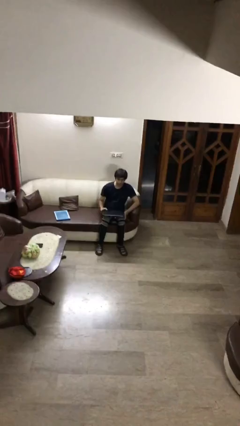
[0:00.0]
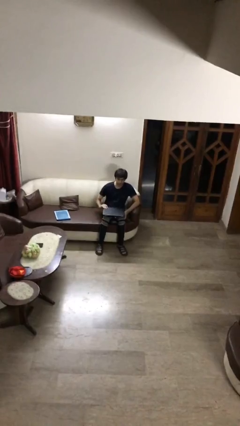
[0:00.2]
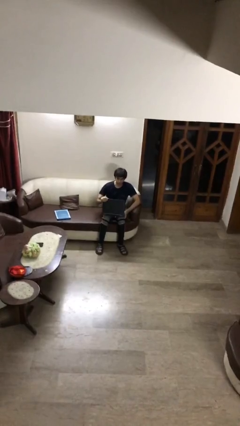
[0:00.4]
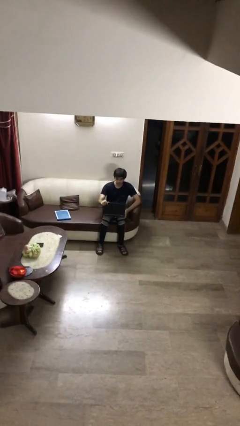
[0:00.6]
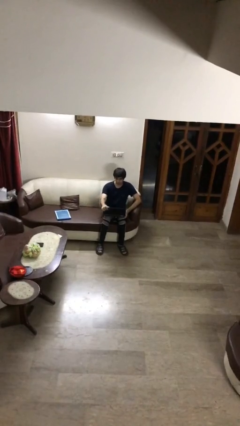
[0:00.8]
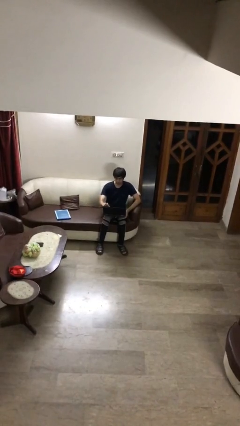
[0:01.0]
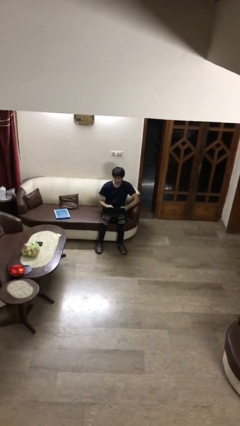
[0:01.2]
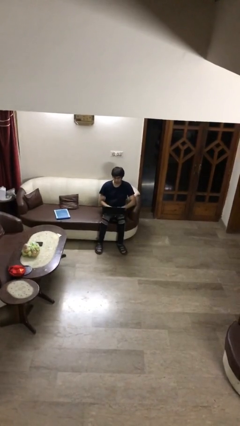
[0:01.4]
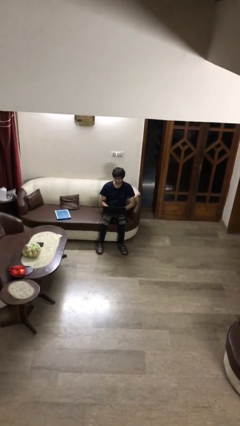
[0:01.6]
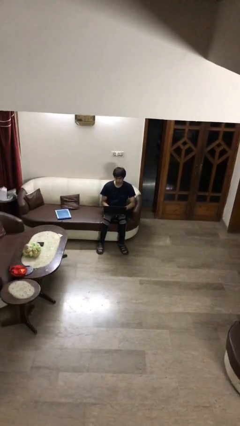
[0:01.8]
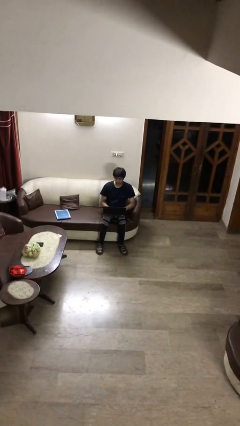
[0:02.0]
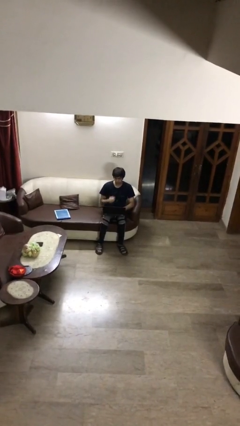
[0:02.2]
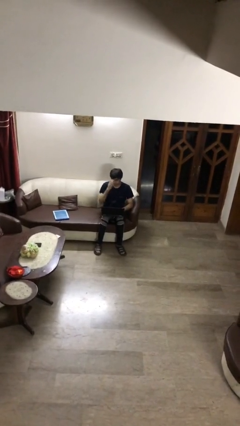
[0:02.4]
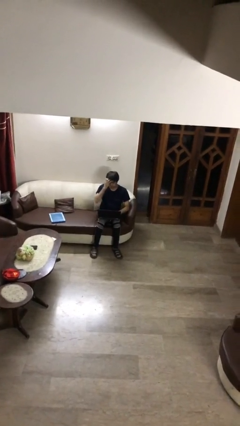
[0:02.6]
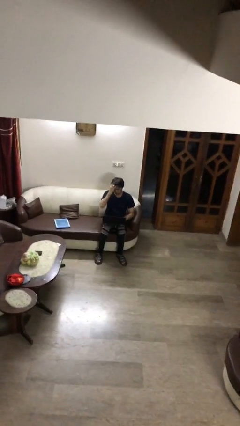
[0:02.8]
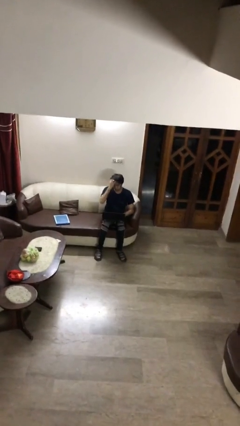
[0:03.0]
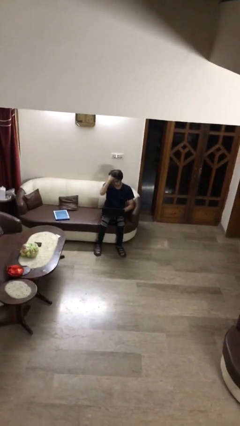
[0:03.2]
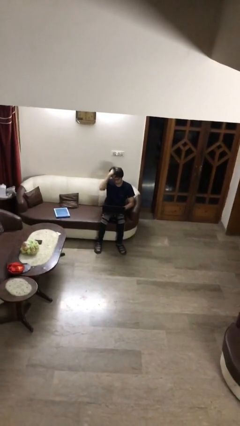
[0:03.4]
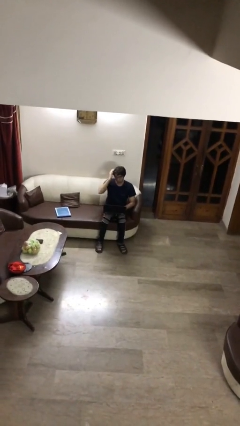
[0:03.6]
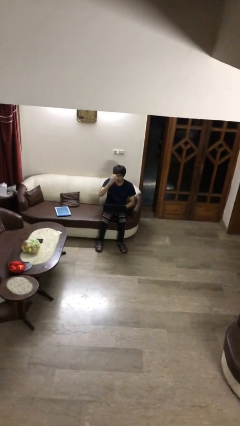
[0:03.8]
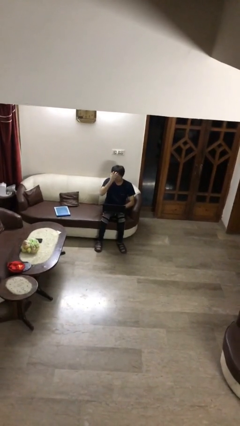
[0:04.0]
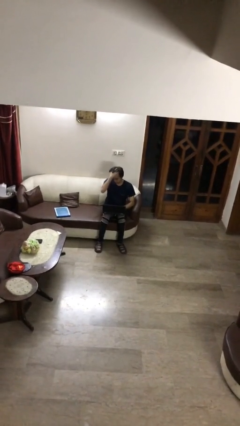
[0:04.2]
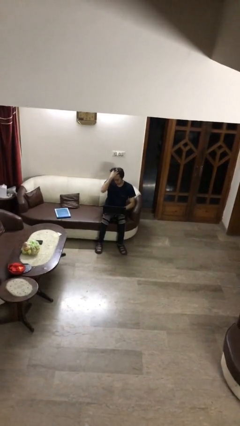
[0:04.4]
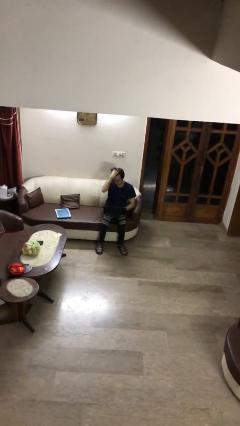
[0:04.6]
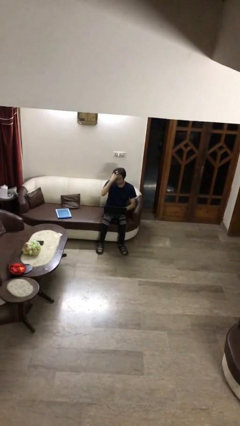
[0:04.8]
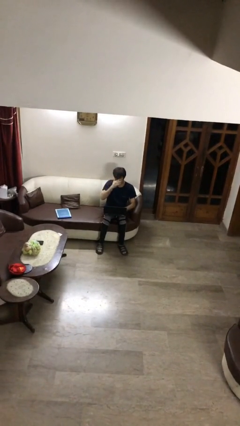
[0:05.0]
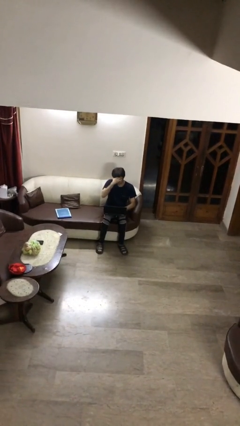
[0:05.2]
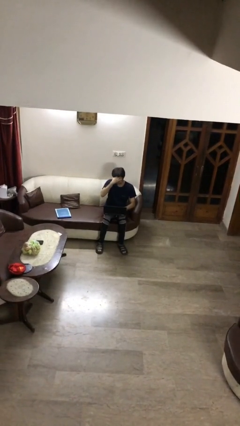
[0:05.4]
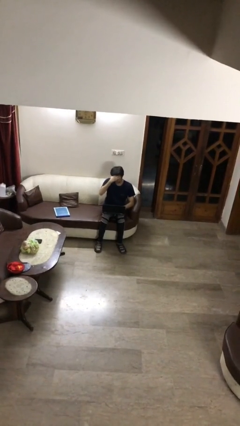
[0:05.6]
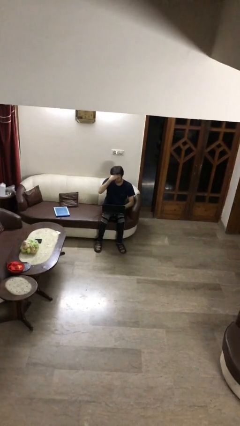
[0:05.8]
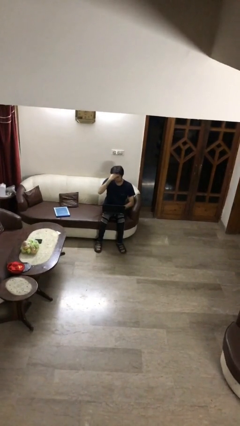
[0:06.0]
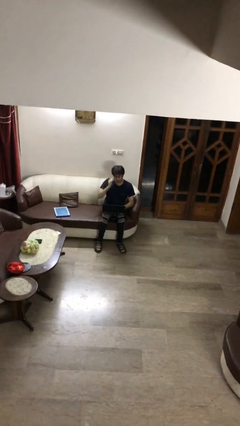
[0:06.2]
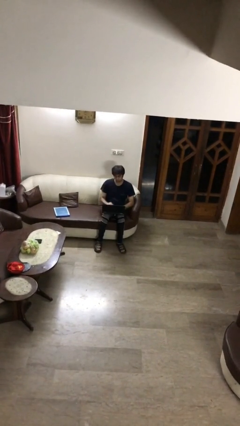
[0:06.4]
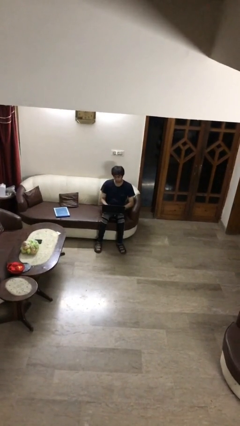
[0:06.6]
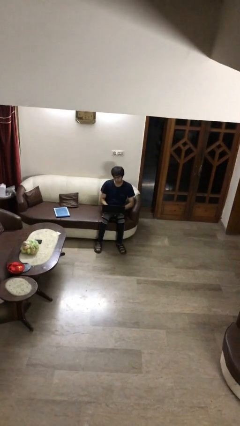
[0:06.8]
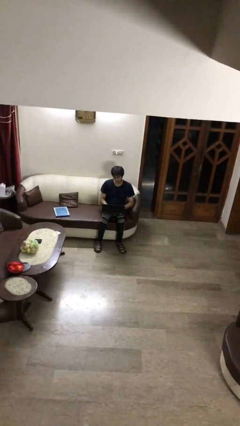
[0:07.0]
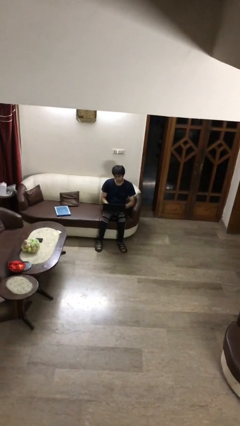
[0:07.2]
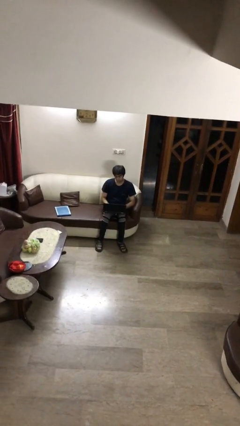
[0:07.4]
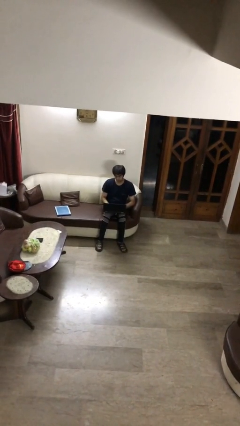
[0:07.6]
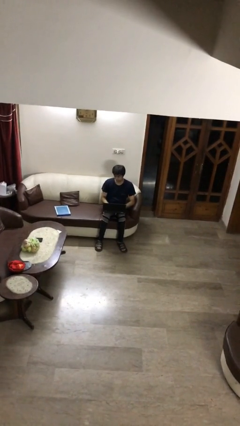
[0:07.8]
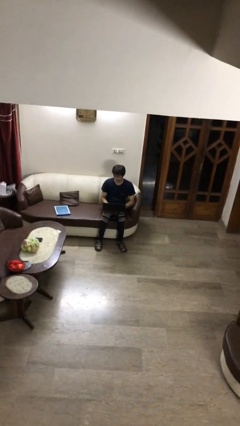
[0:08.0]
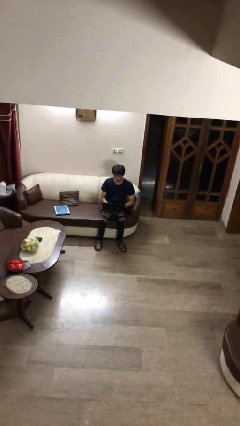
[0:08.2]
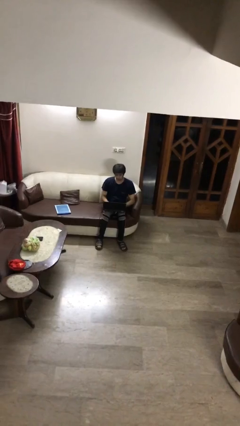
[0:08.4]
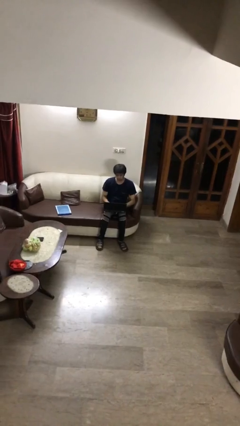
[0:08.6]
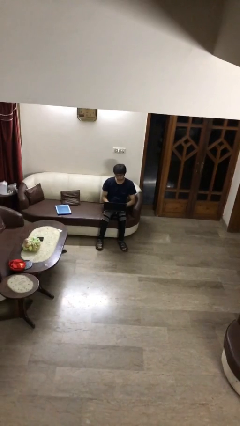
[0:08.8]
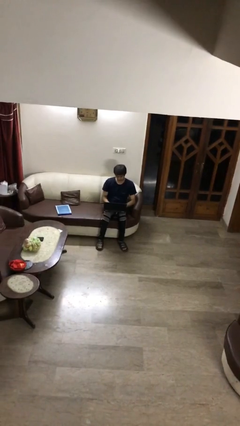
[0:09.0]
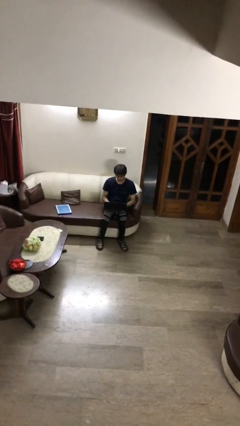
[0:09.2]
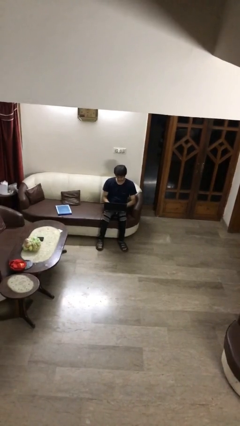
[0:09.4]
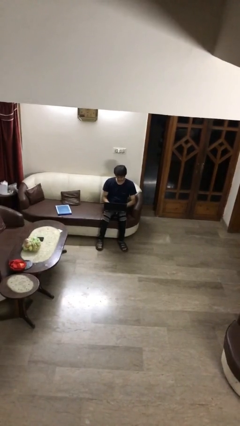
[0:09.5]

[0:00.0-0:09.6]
person interacts with laptop

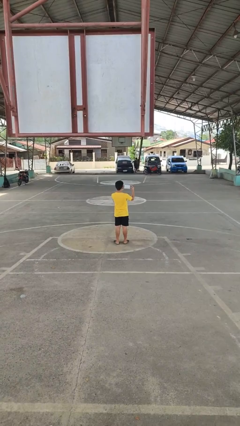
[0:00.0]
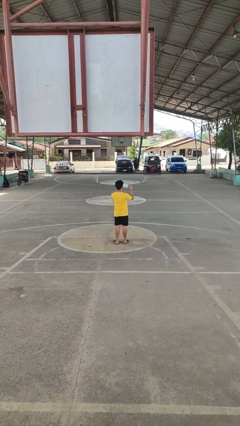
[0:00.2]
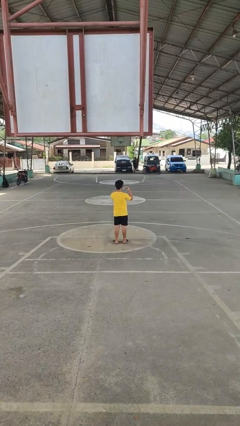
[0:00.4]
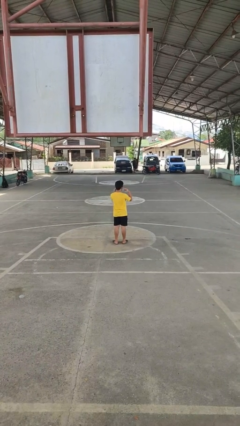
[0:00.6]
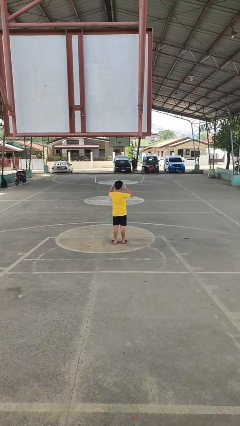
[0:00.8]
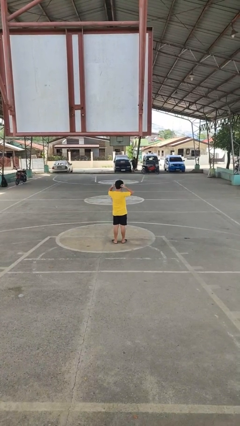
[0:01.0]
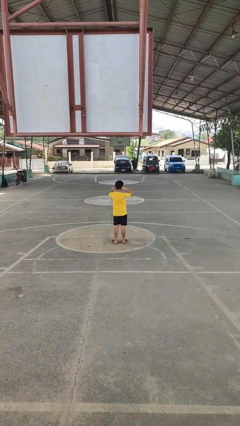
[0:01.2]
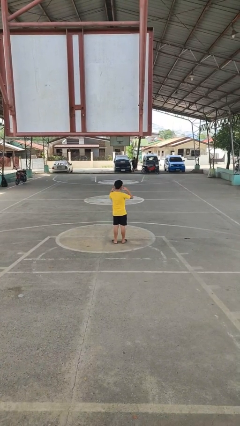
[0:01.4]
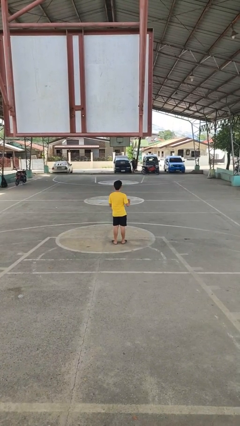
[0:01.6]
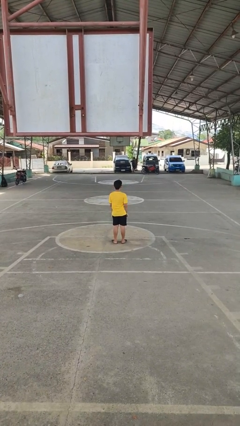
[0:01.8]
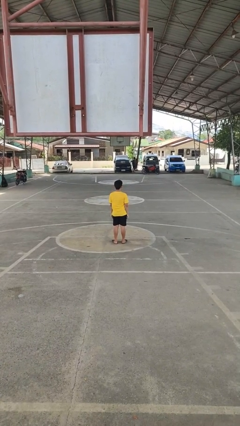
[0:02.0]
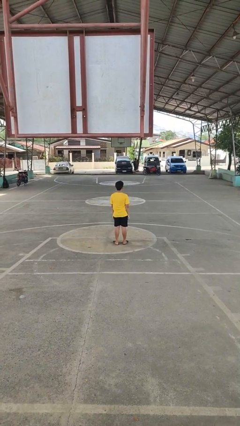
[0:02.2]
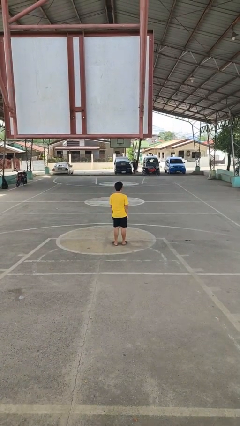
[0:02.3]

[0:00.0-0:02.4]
person puts on facemask

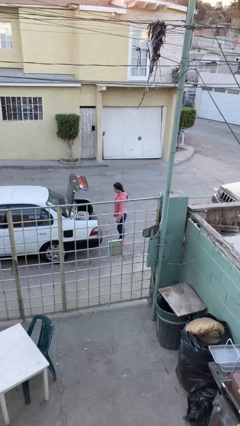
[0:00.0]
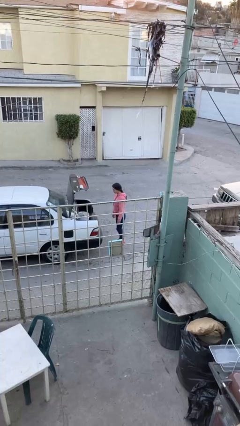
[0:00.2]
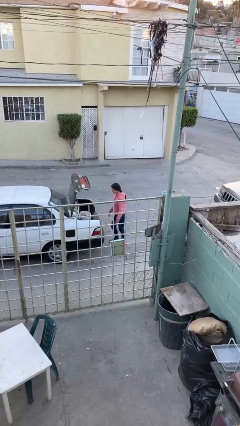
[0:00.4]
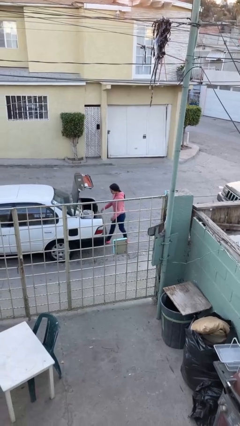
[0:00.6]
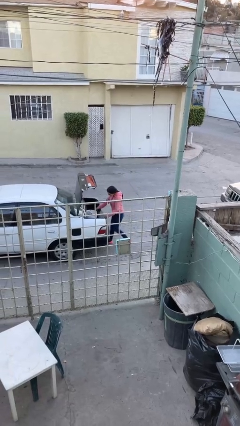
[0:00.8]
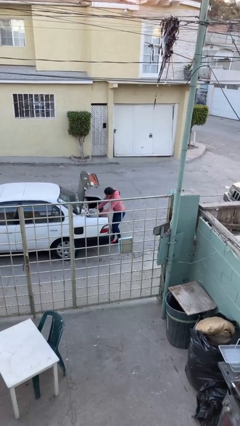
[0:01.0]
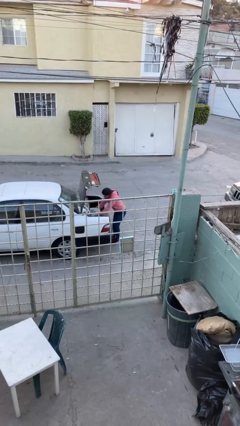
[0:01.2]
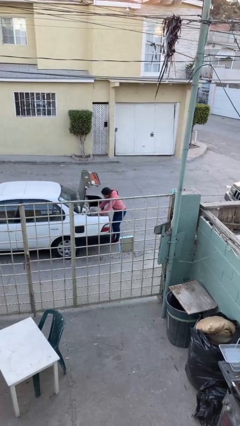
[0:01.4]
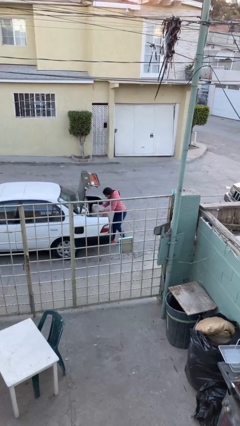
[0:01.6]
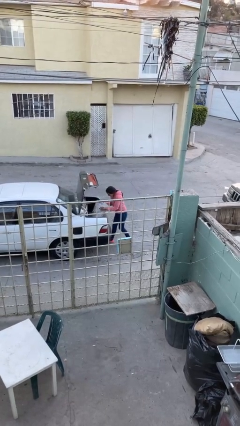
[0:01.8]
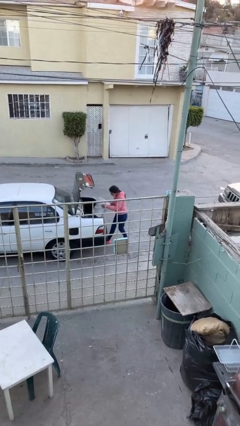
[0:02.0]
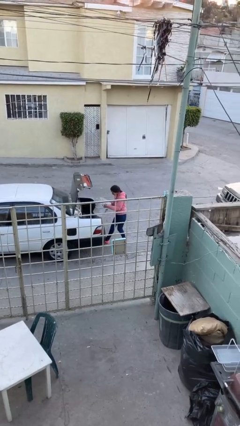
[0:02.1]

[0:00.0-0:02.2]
person unloads car

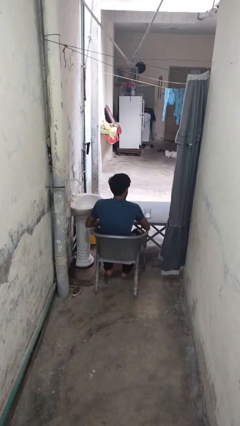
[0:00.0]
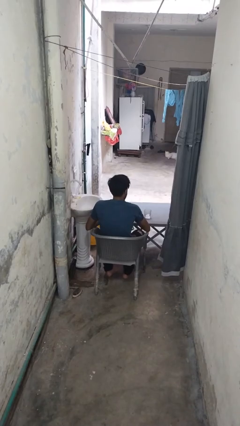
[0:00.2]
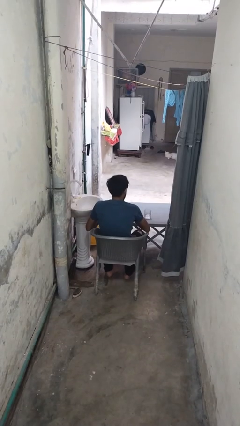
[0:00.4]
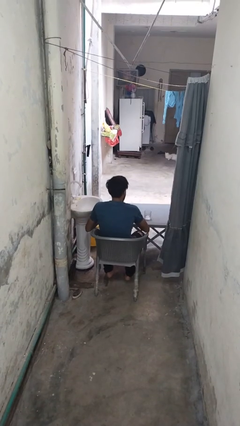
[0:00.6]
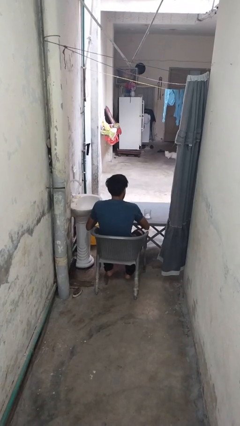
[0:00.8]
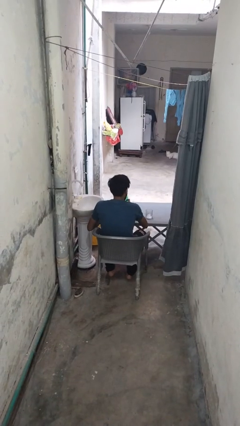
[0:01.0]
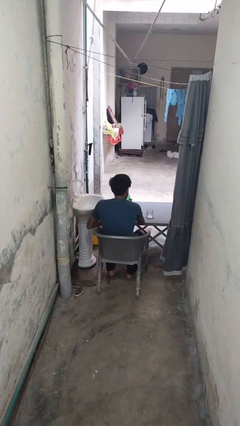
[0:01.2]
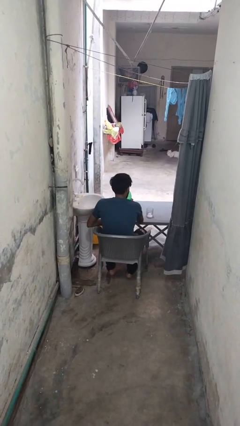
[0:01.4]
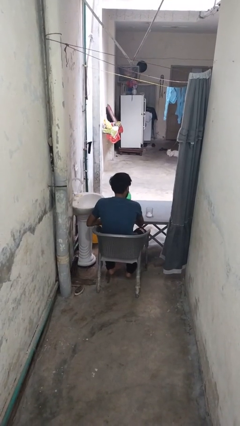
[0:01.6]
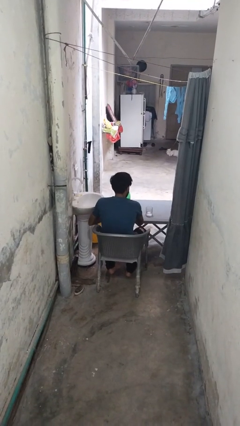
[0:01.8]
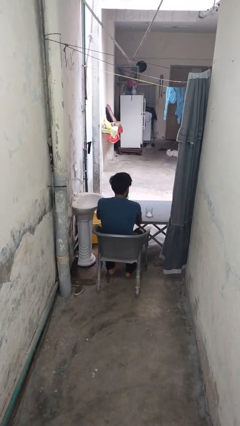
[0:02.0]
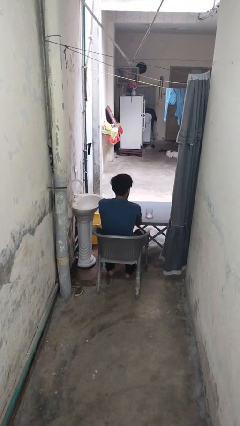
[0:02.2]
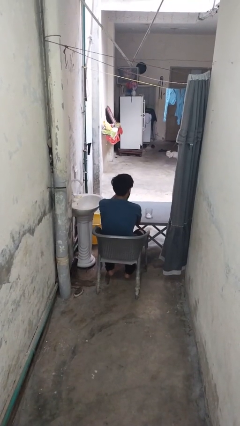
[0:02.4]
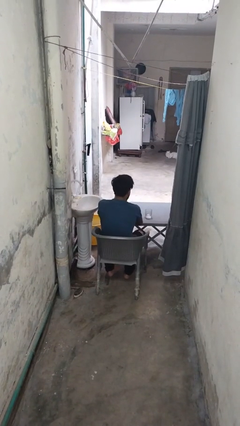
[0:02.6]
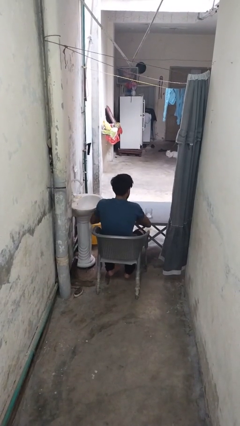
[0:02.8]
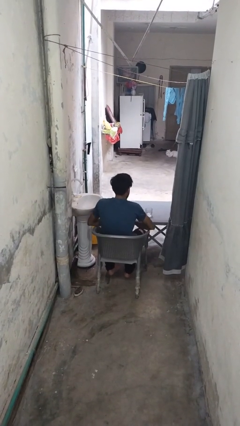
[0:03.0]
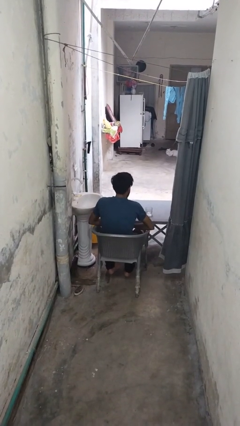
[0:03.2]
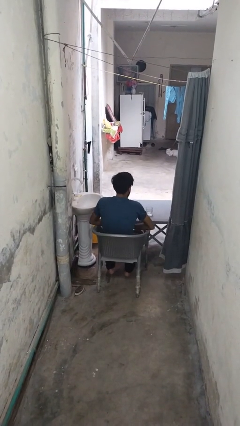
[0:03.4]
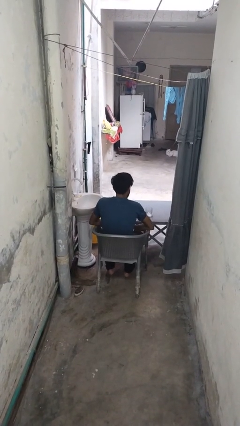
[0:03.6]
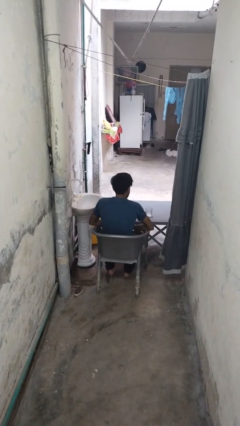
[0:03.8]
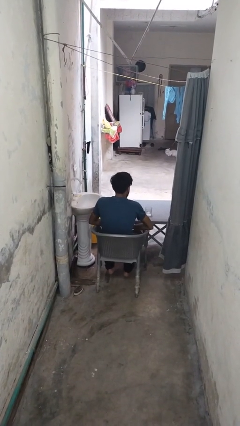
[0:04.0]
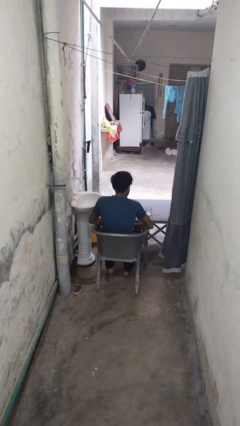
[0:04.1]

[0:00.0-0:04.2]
person screws lid to bottle
